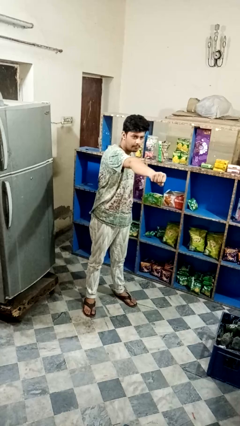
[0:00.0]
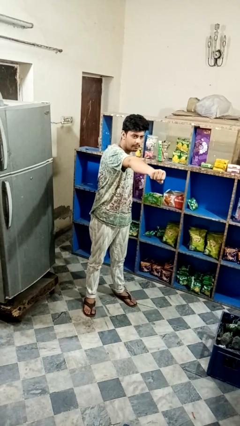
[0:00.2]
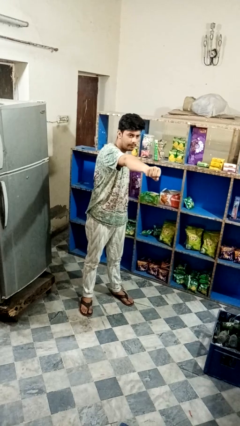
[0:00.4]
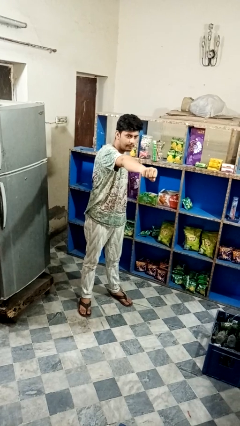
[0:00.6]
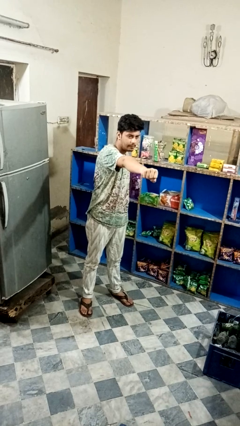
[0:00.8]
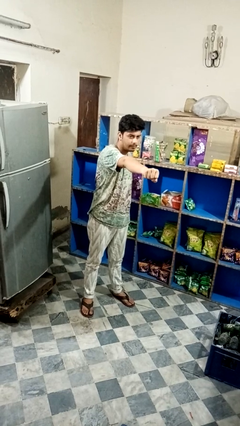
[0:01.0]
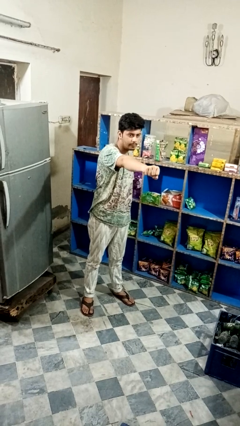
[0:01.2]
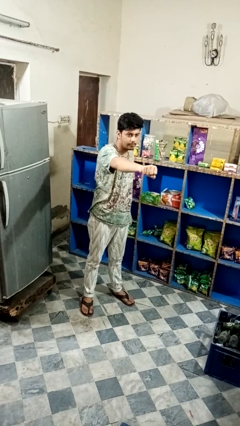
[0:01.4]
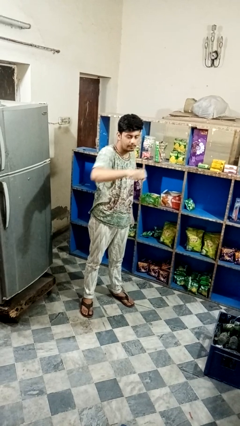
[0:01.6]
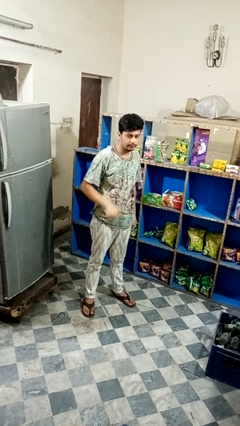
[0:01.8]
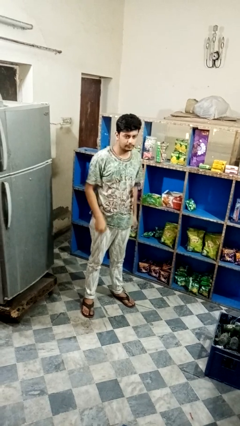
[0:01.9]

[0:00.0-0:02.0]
person punches

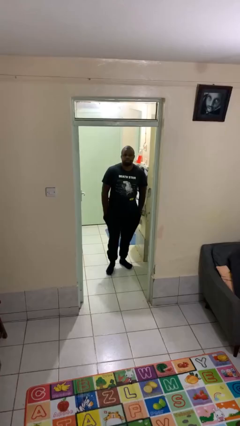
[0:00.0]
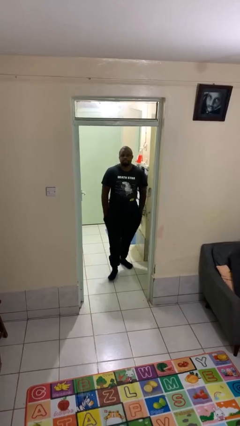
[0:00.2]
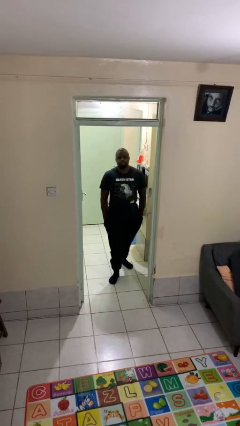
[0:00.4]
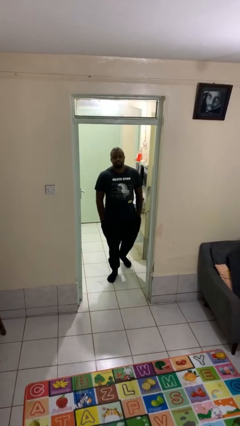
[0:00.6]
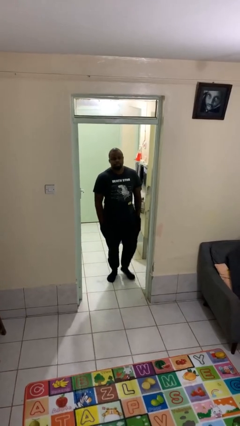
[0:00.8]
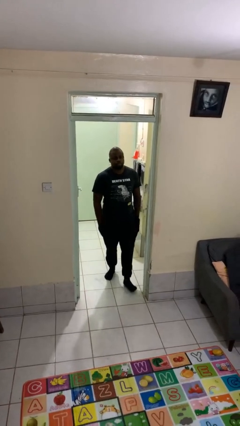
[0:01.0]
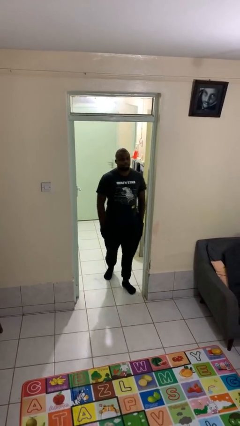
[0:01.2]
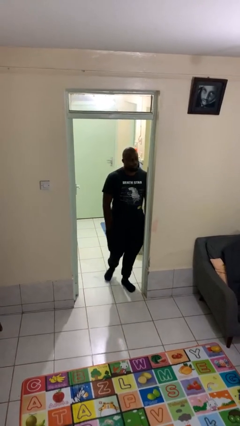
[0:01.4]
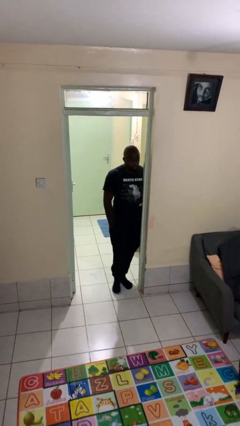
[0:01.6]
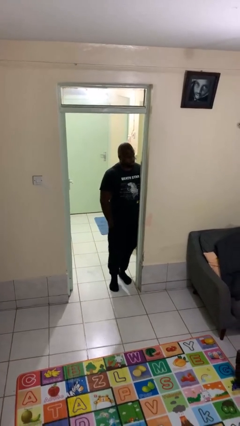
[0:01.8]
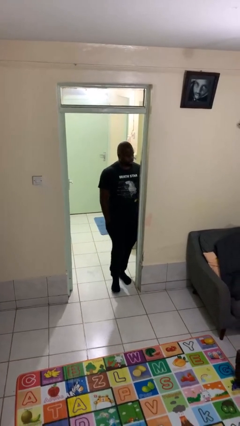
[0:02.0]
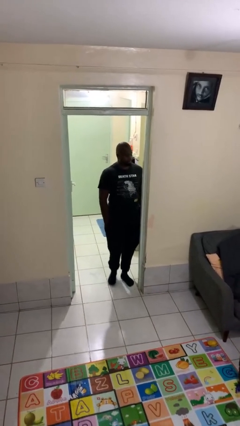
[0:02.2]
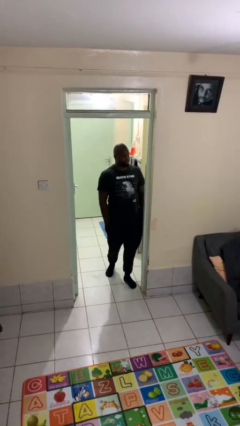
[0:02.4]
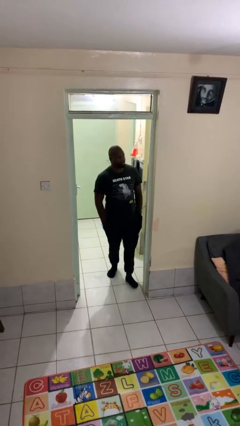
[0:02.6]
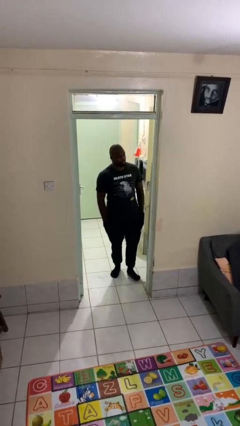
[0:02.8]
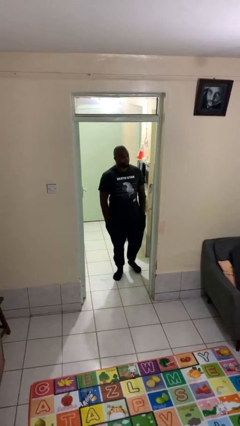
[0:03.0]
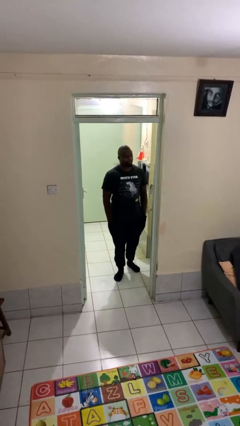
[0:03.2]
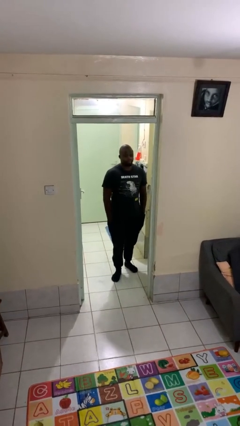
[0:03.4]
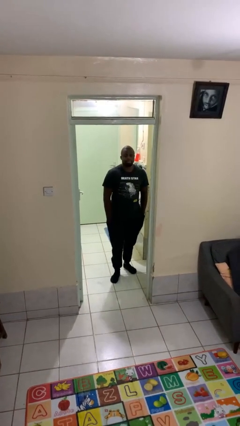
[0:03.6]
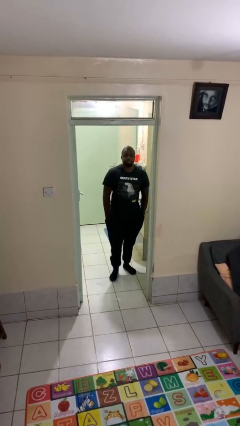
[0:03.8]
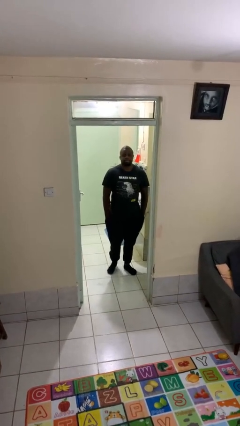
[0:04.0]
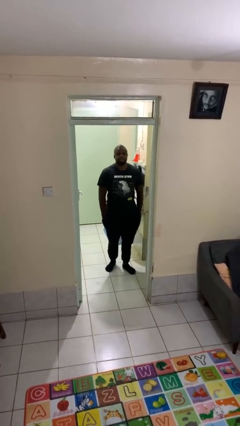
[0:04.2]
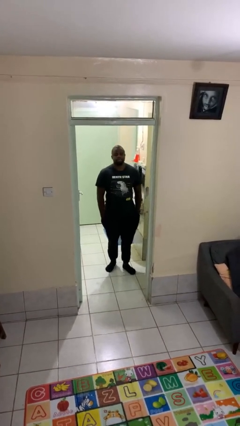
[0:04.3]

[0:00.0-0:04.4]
person bumps into wall

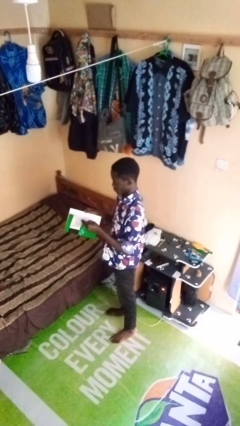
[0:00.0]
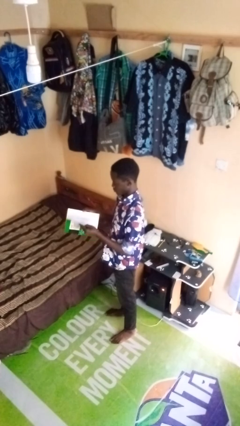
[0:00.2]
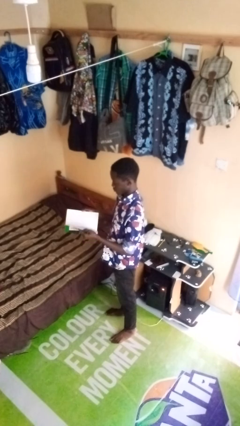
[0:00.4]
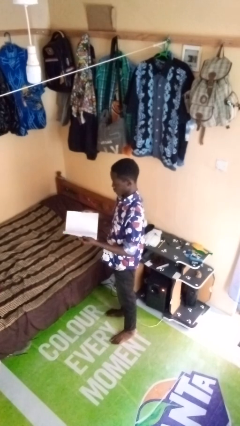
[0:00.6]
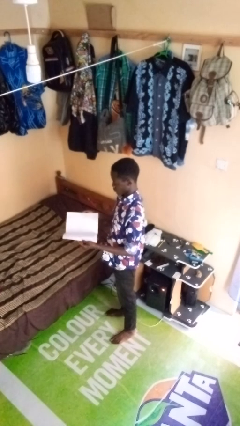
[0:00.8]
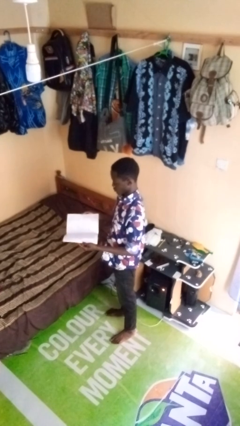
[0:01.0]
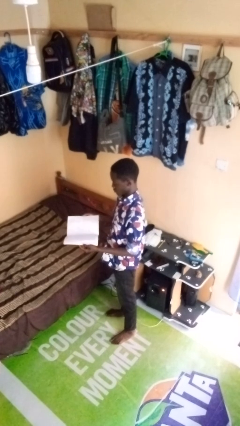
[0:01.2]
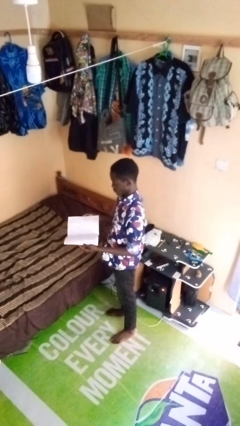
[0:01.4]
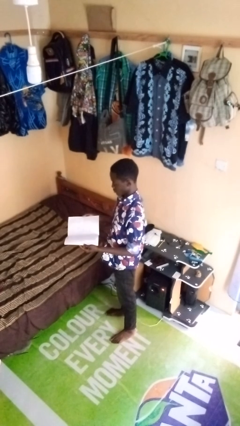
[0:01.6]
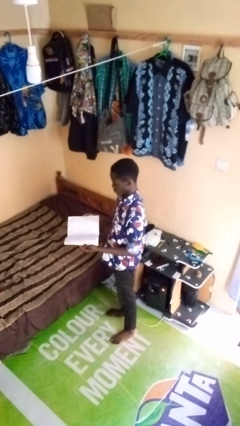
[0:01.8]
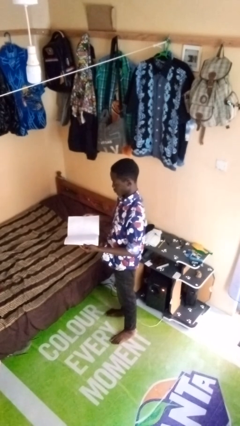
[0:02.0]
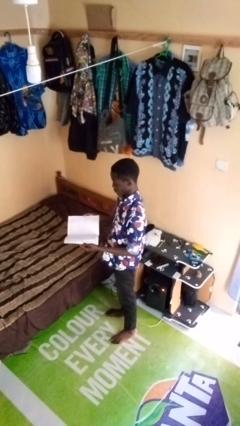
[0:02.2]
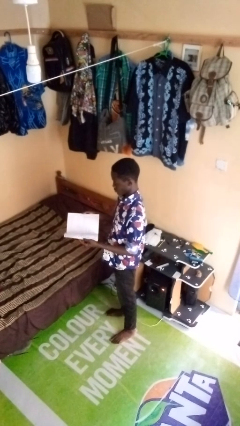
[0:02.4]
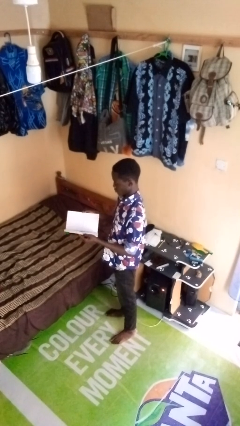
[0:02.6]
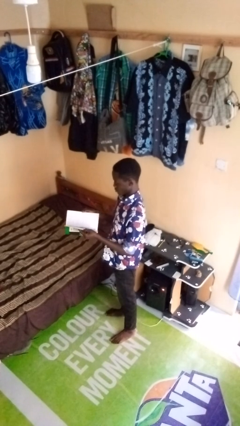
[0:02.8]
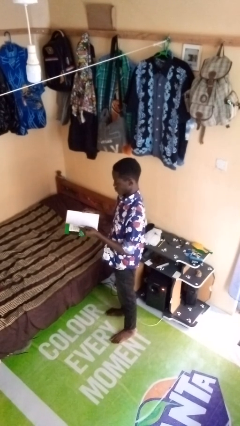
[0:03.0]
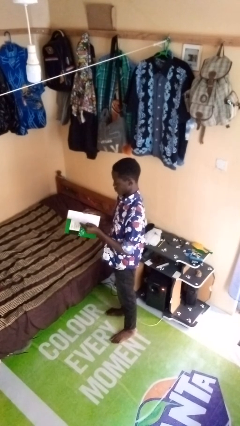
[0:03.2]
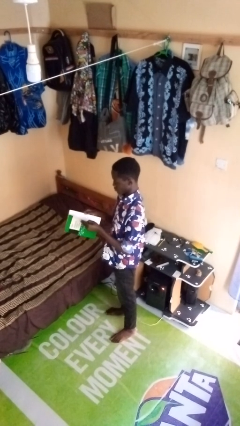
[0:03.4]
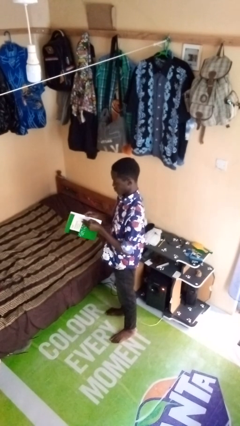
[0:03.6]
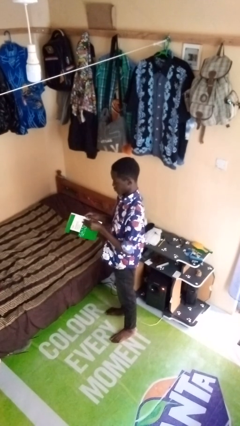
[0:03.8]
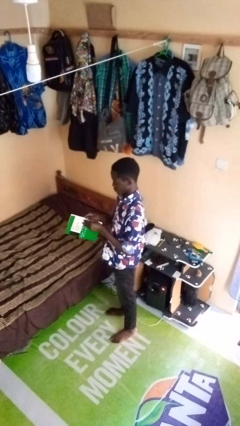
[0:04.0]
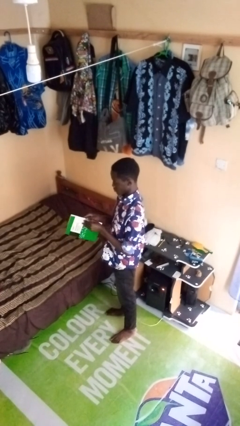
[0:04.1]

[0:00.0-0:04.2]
person reads magazine

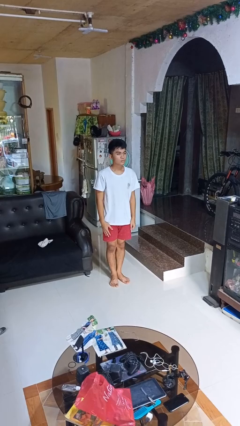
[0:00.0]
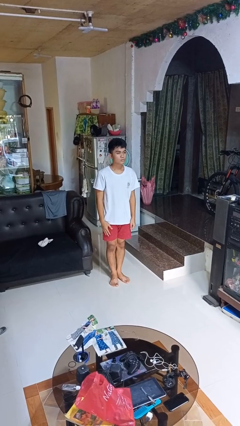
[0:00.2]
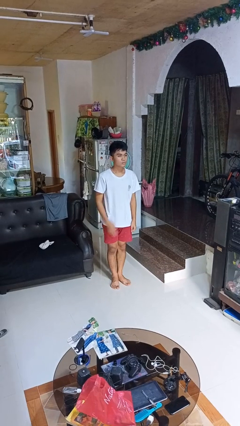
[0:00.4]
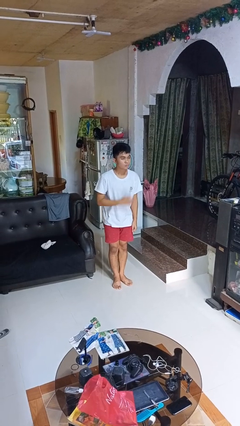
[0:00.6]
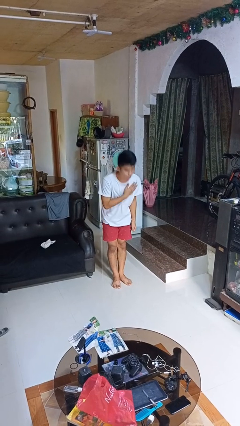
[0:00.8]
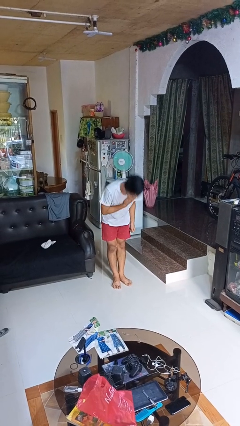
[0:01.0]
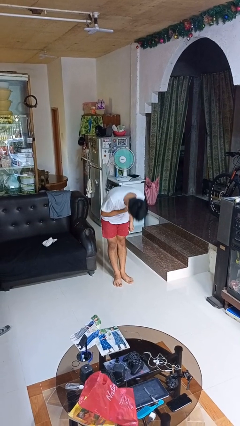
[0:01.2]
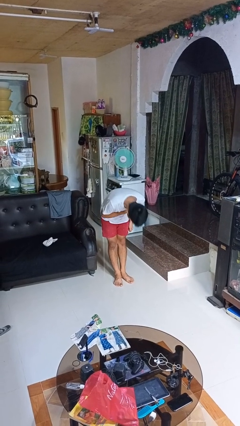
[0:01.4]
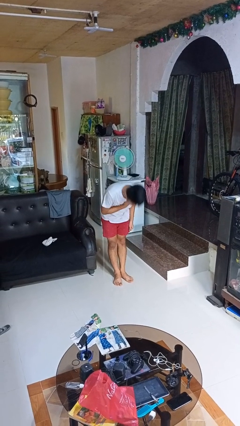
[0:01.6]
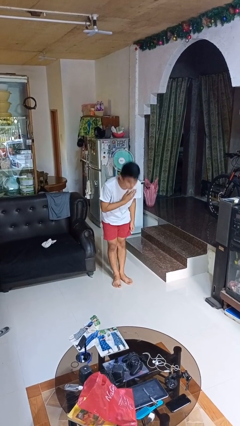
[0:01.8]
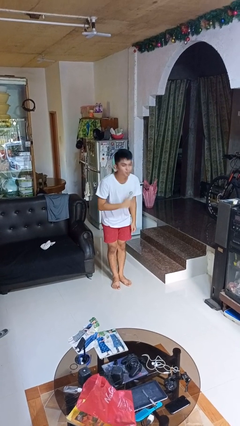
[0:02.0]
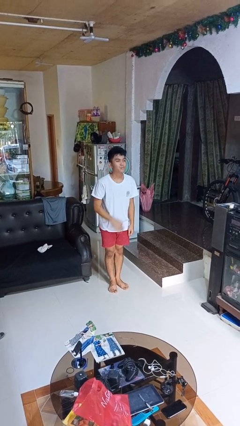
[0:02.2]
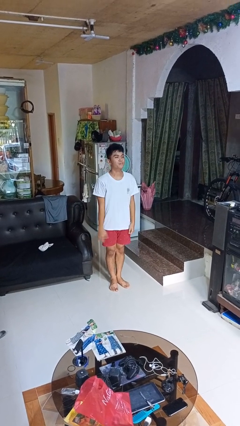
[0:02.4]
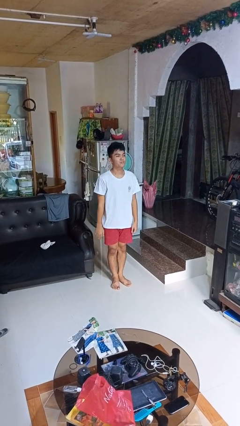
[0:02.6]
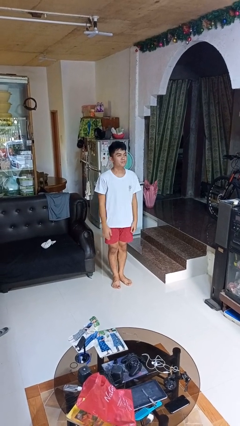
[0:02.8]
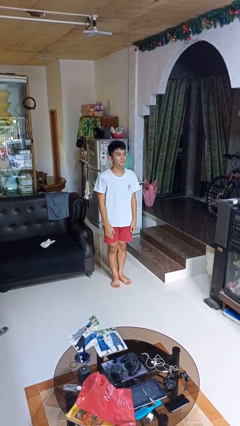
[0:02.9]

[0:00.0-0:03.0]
person bows

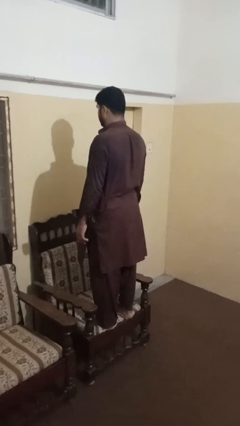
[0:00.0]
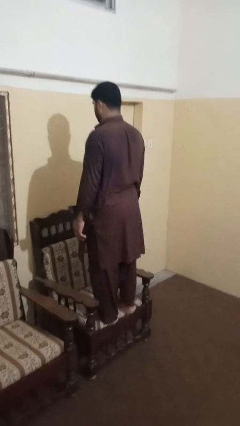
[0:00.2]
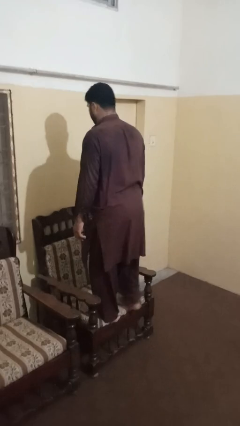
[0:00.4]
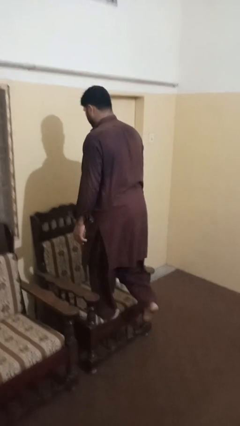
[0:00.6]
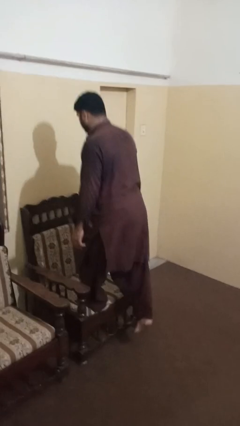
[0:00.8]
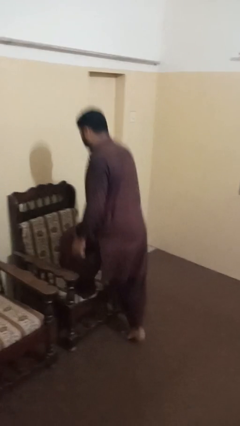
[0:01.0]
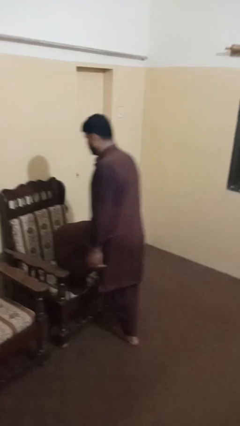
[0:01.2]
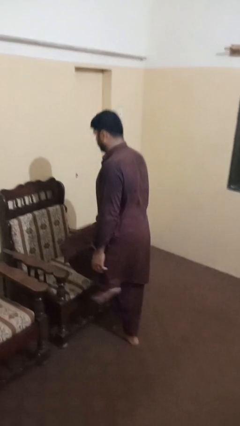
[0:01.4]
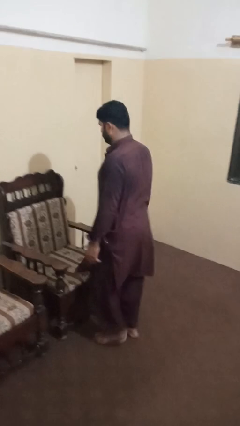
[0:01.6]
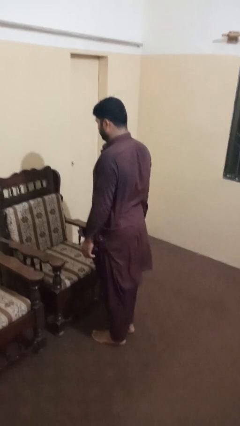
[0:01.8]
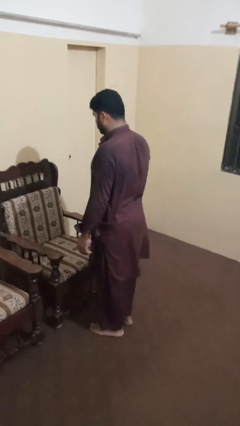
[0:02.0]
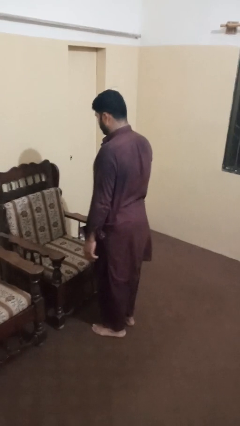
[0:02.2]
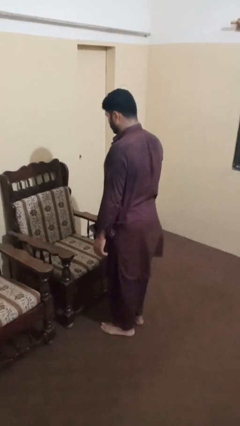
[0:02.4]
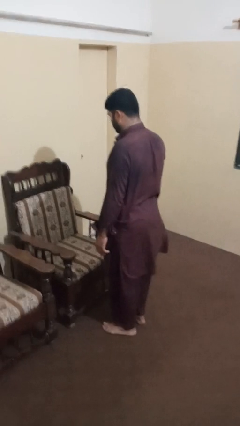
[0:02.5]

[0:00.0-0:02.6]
person climbs off chair

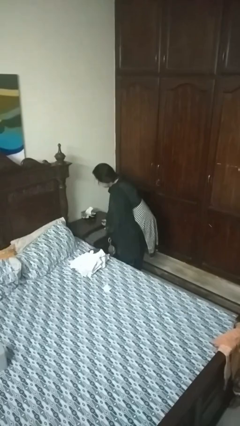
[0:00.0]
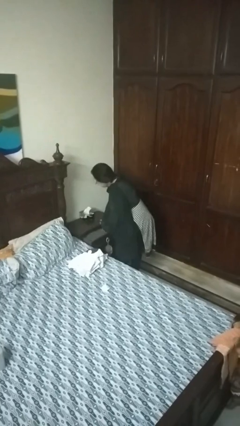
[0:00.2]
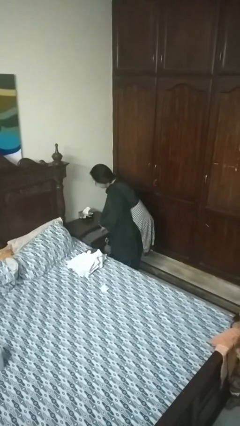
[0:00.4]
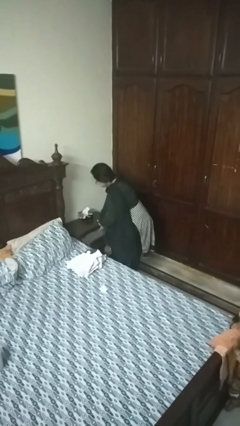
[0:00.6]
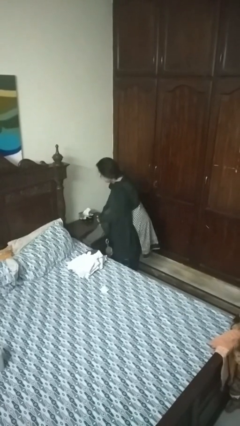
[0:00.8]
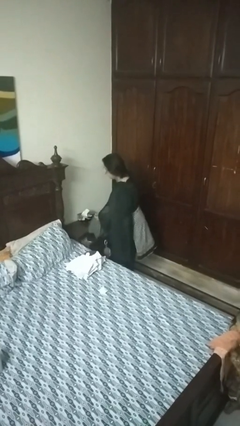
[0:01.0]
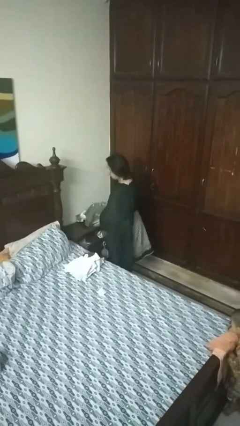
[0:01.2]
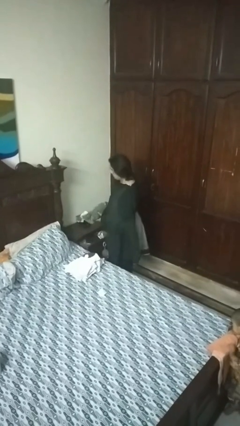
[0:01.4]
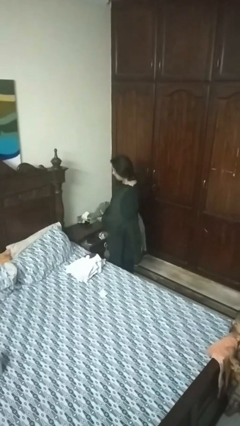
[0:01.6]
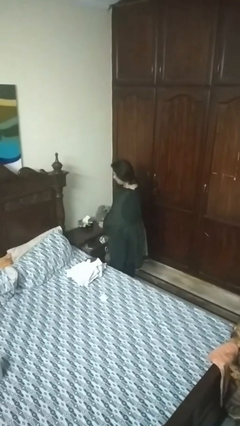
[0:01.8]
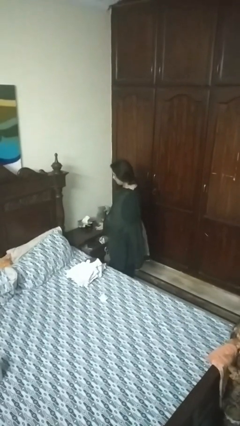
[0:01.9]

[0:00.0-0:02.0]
person takes clothes from dresser
